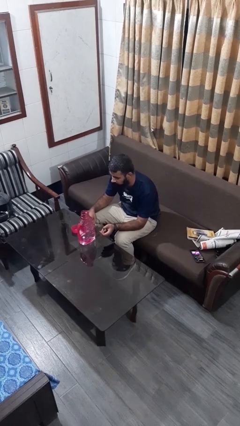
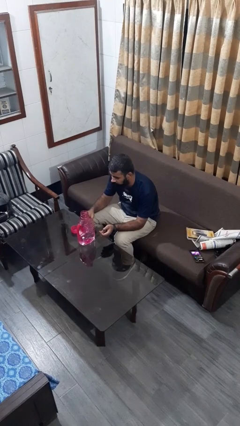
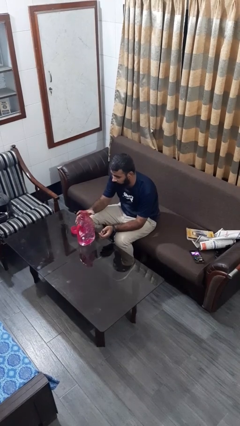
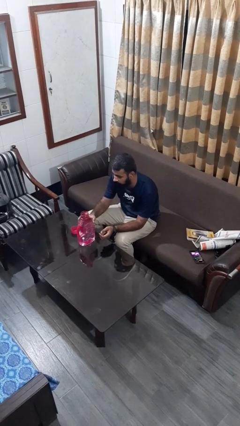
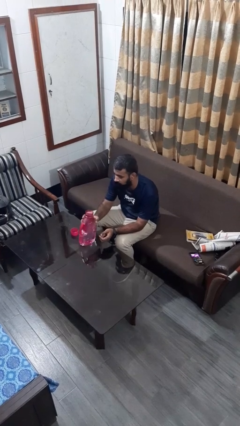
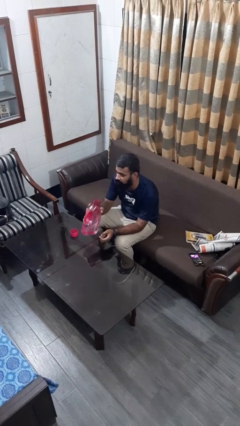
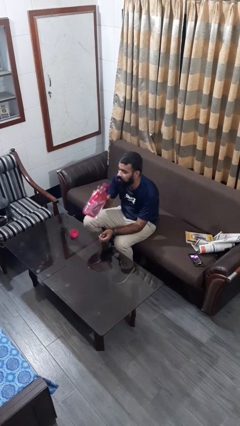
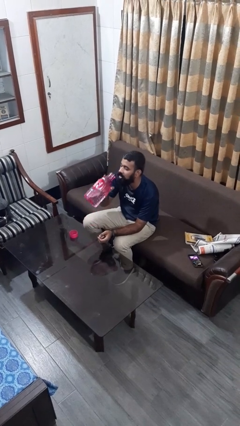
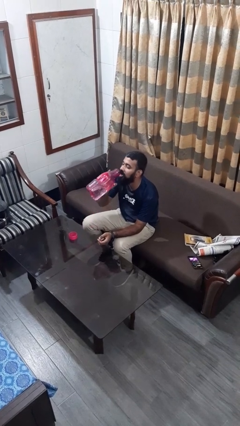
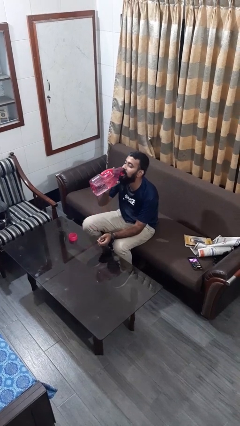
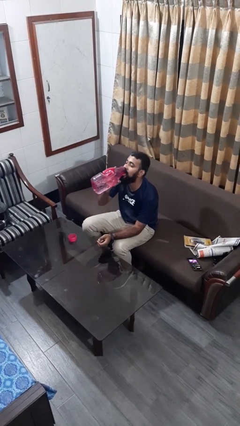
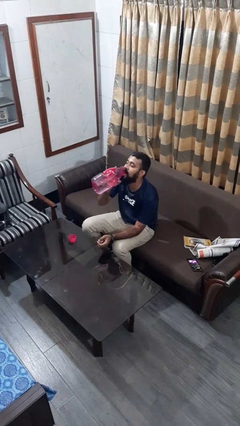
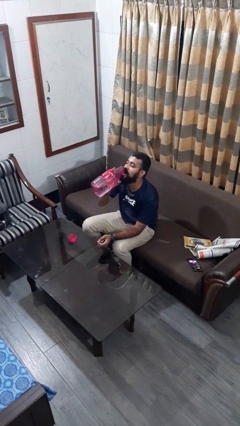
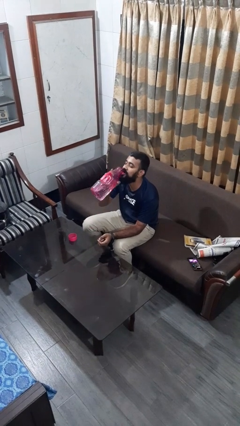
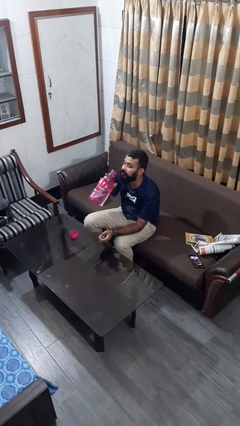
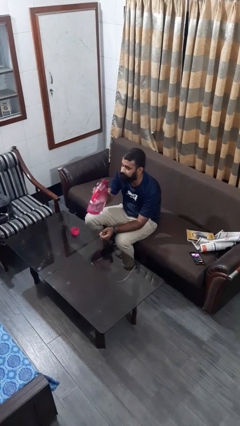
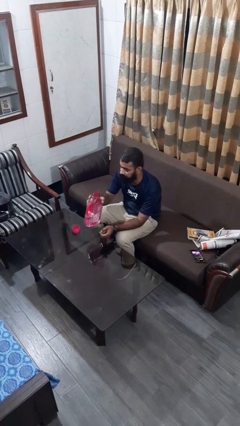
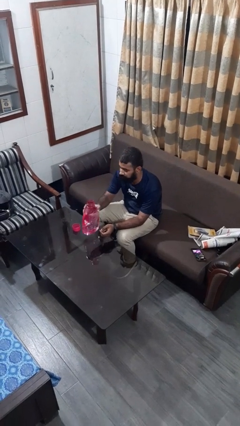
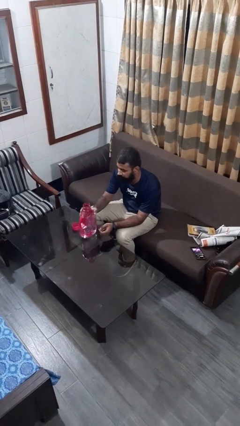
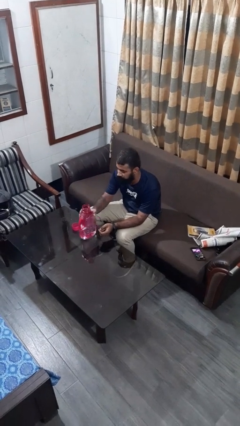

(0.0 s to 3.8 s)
person drinks from bottle

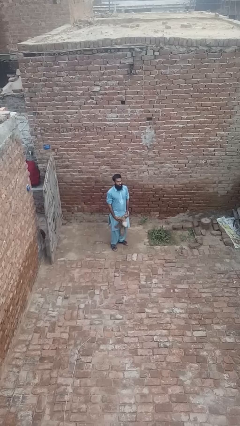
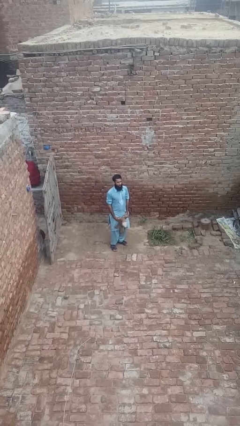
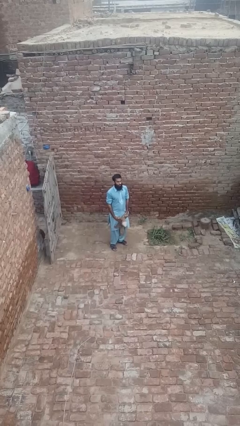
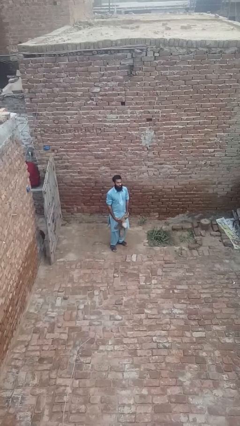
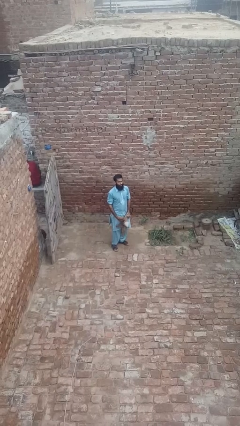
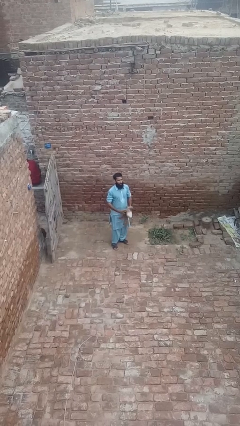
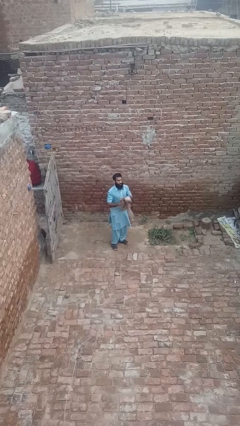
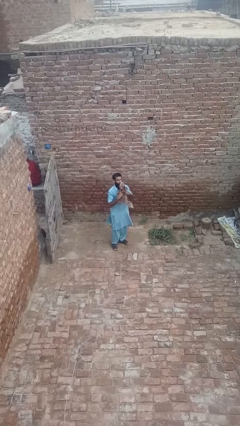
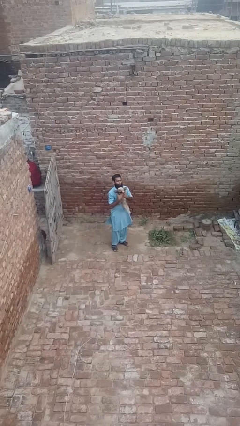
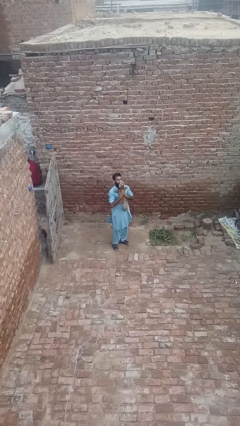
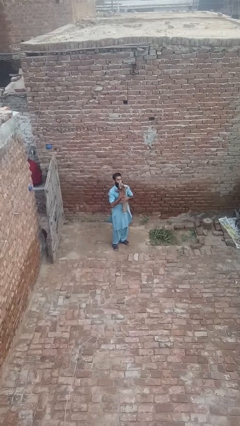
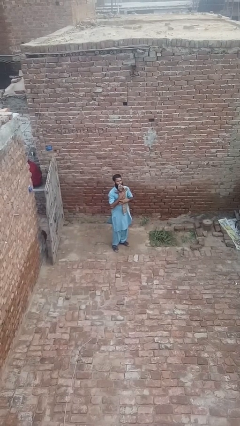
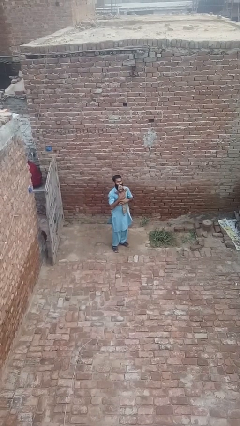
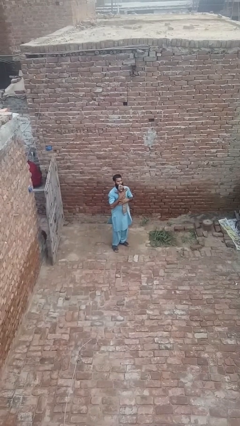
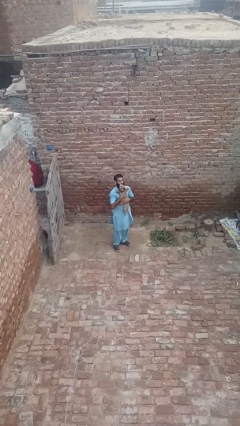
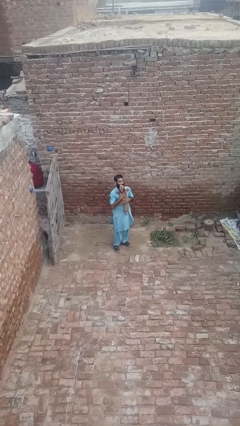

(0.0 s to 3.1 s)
person hugs stuffed animal

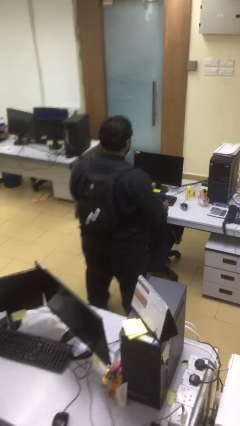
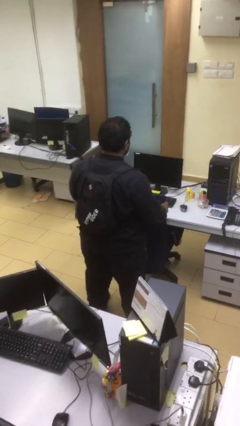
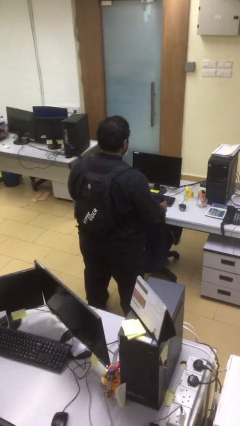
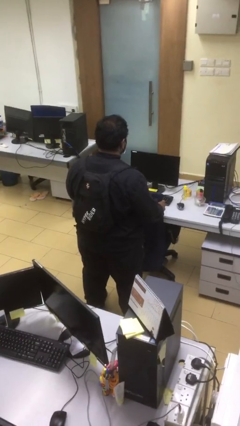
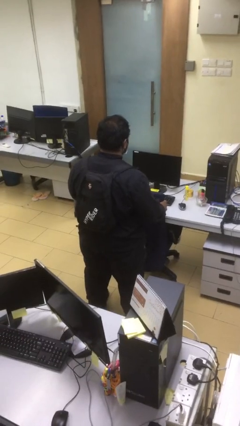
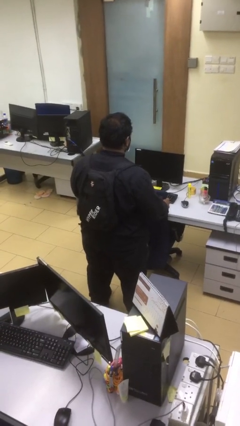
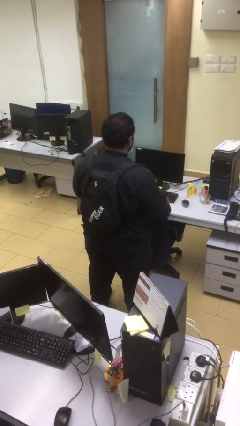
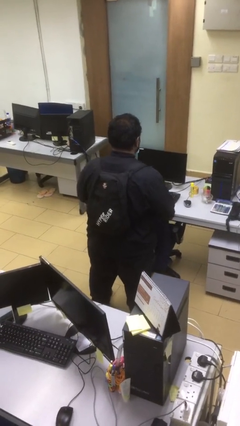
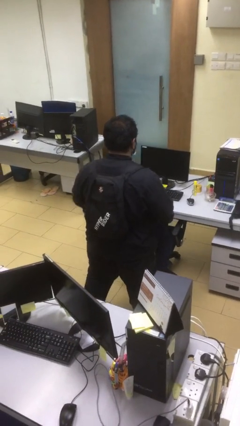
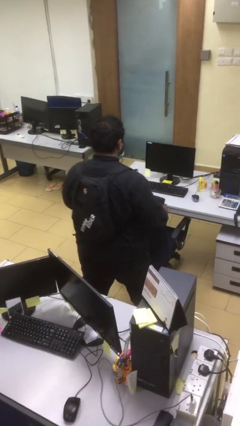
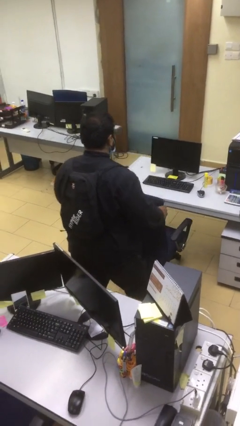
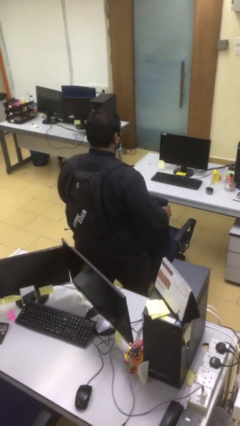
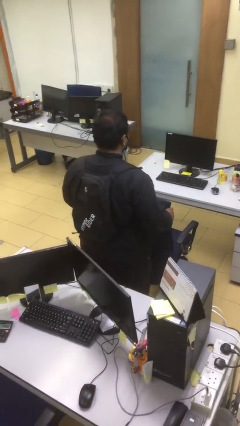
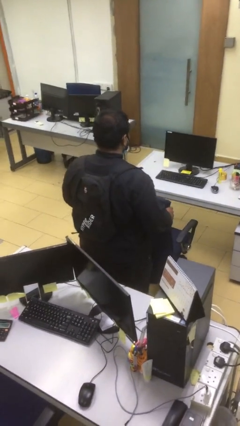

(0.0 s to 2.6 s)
person pulls out chair

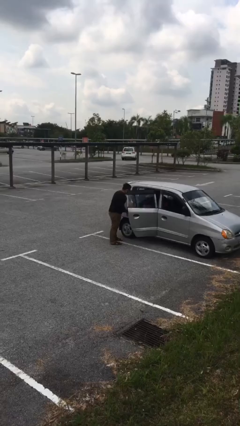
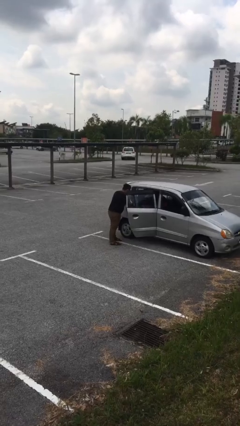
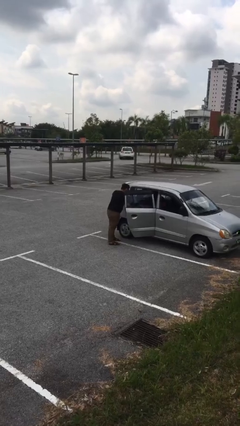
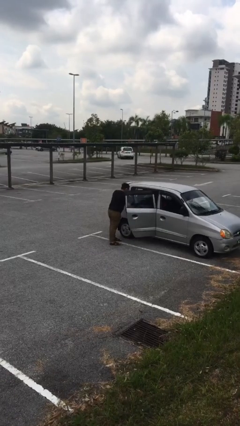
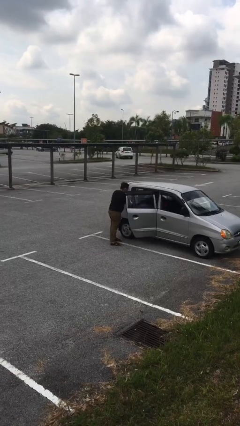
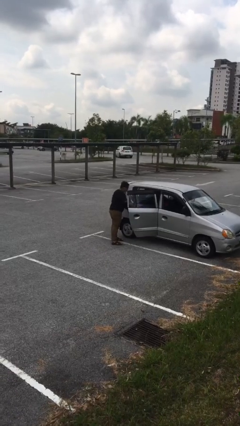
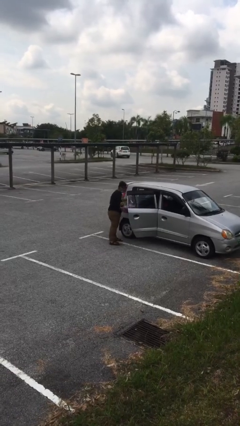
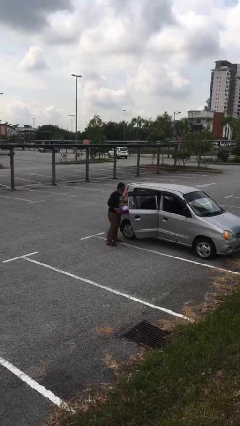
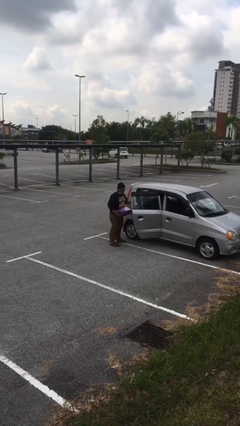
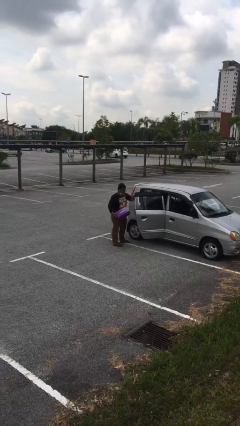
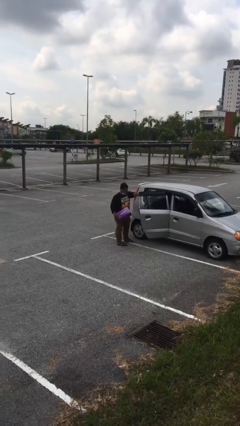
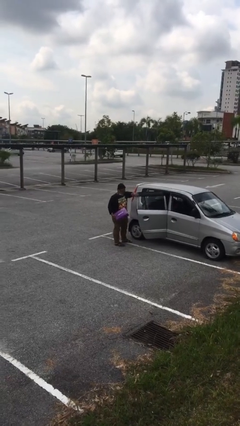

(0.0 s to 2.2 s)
person unloads car

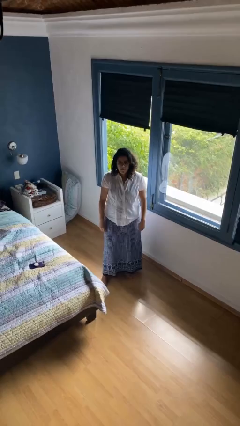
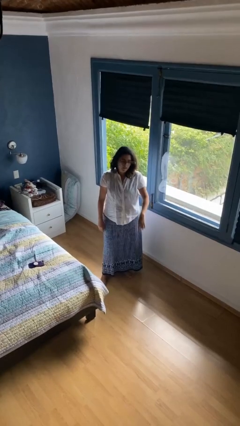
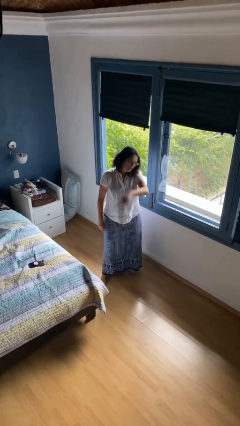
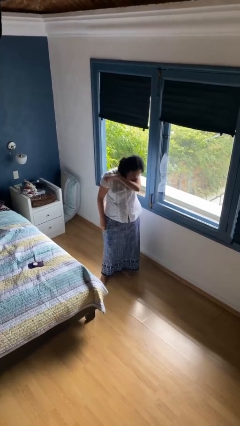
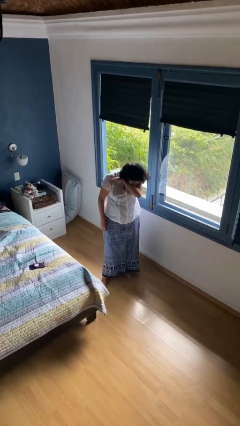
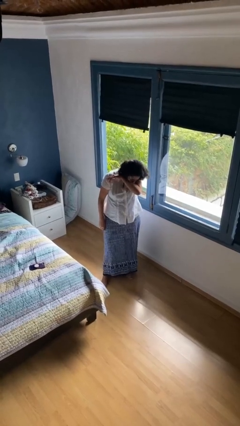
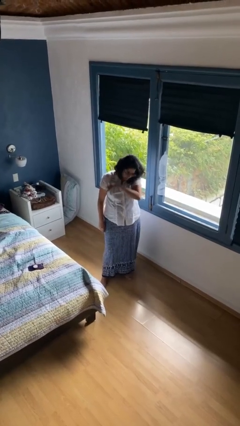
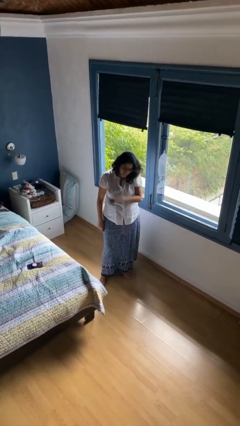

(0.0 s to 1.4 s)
person sneezes into arm

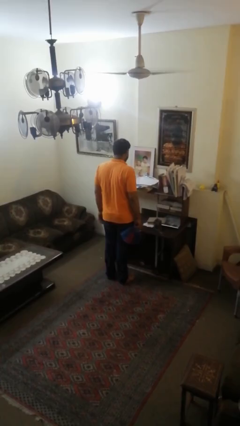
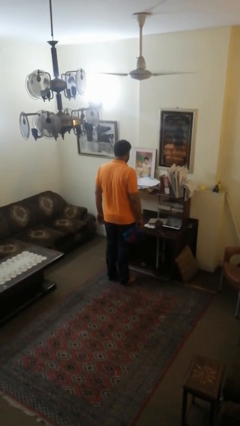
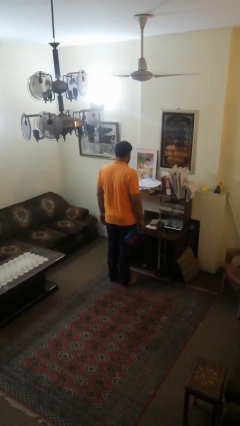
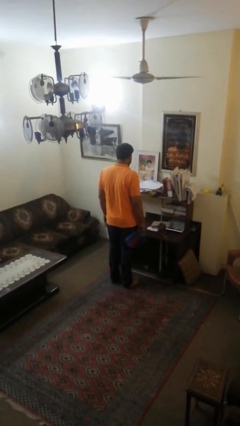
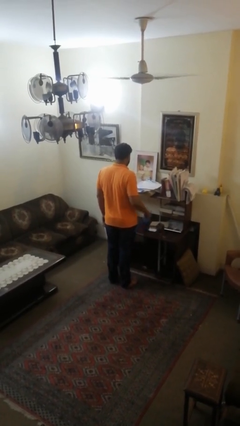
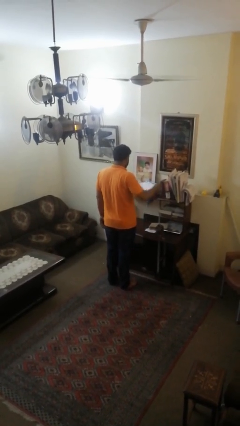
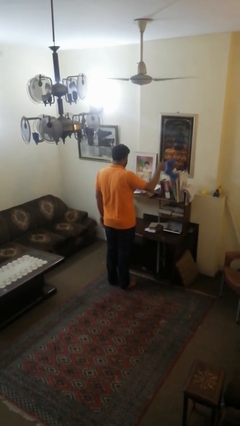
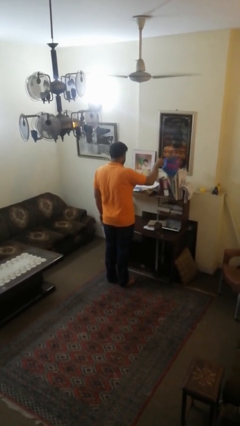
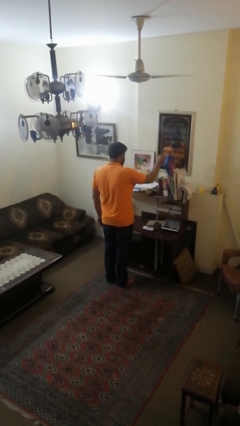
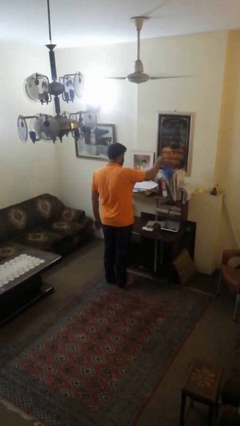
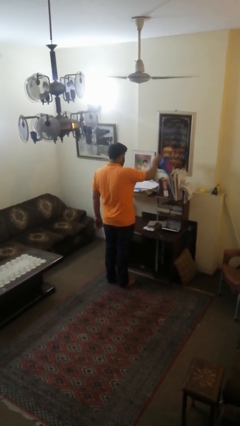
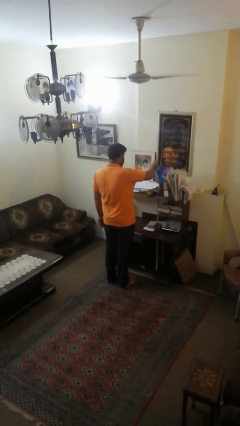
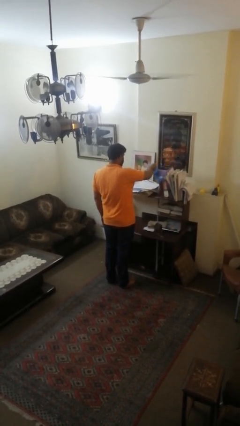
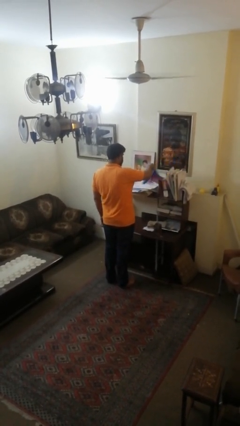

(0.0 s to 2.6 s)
person dusts furniture

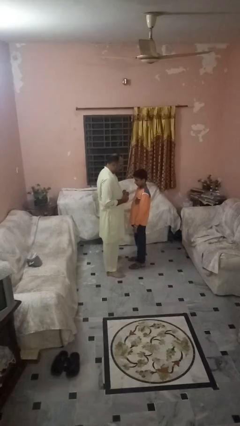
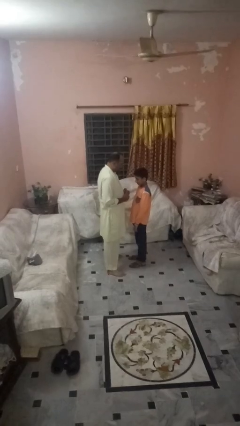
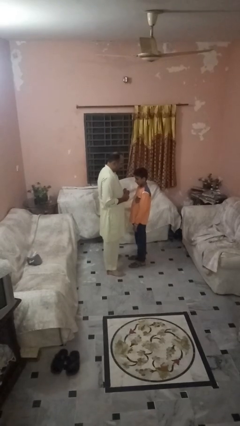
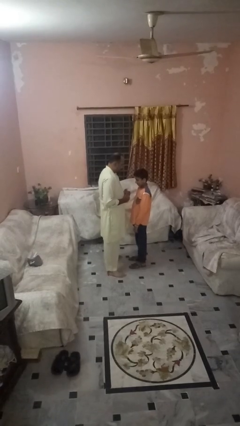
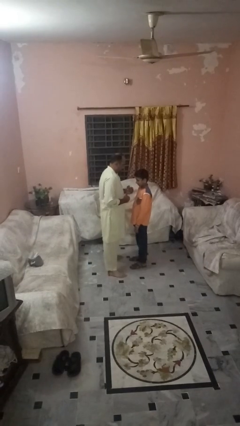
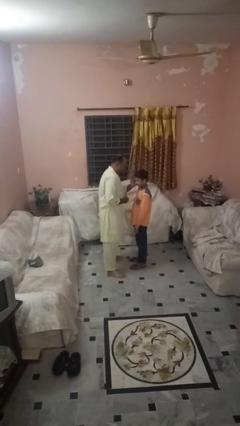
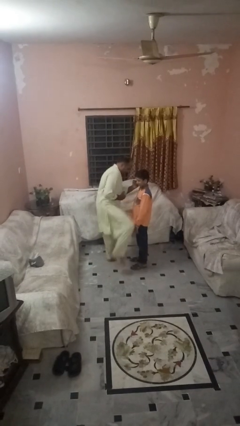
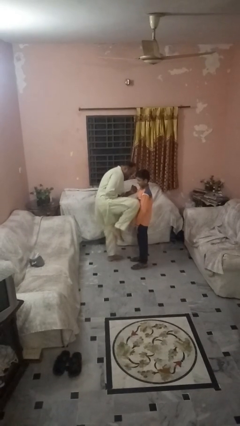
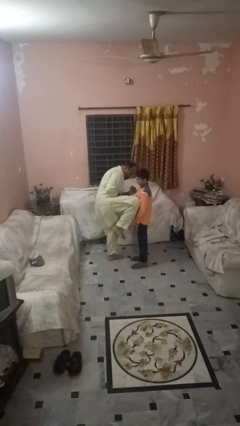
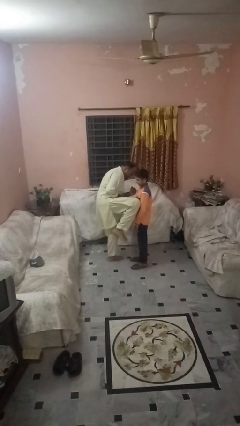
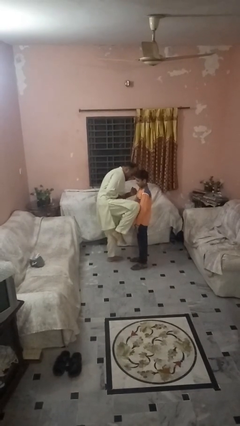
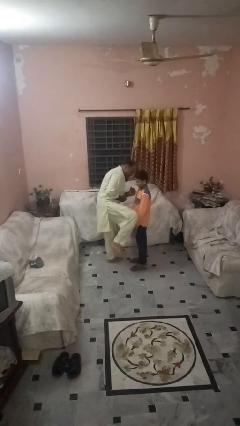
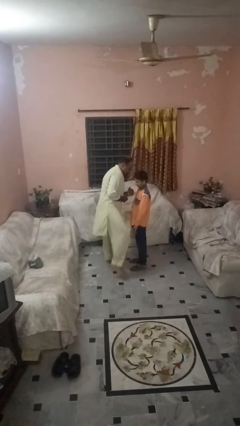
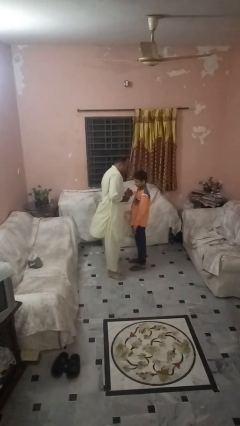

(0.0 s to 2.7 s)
person kicks object to person
